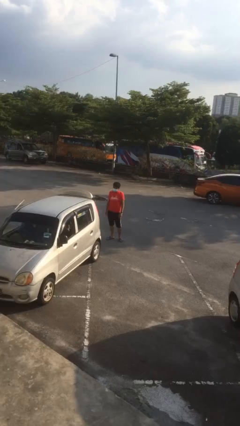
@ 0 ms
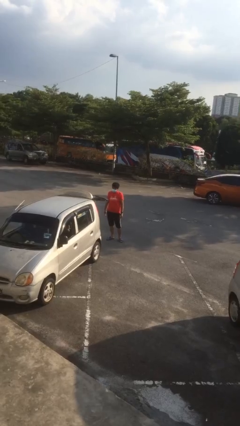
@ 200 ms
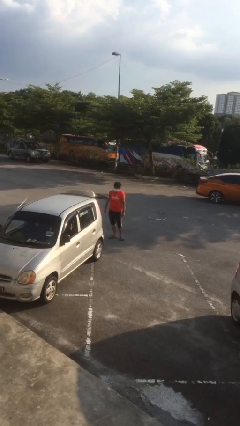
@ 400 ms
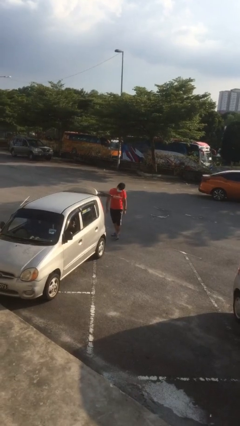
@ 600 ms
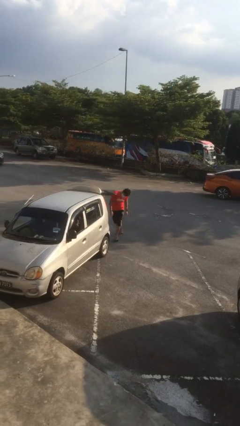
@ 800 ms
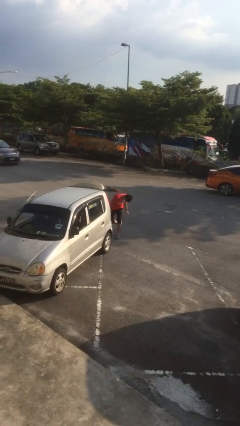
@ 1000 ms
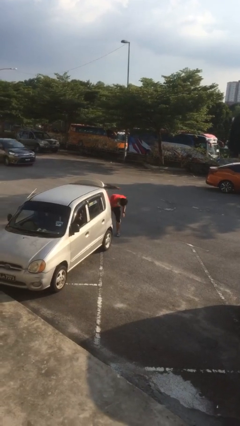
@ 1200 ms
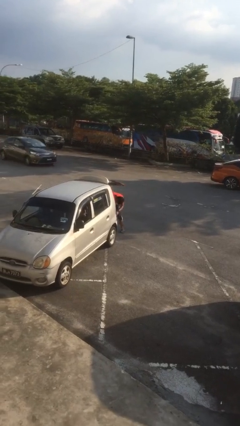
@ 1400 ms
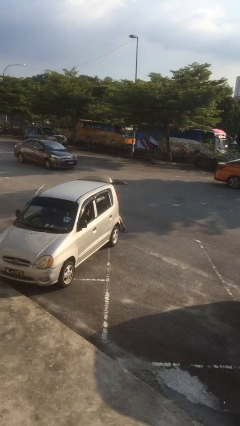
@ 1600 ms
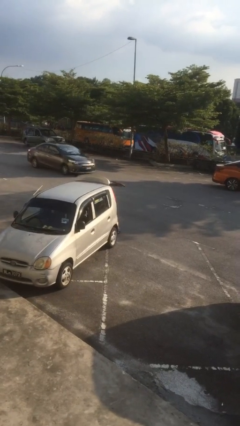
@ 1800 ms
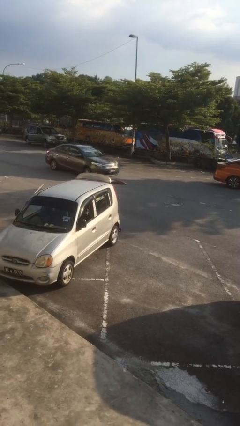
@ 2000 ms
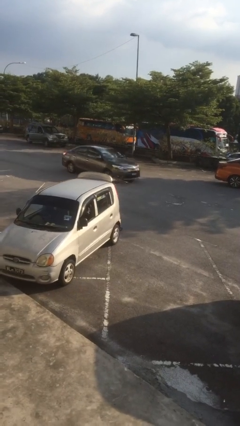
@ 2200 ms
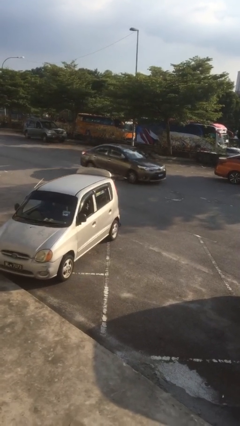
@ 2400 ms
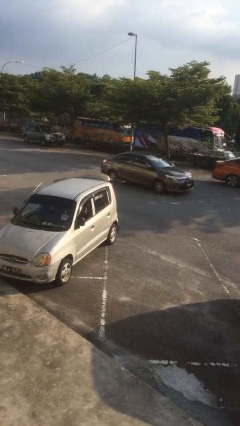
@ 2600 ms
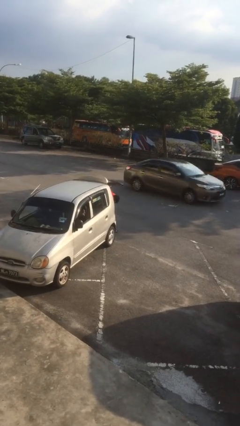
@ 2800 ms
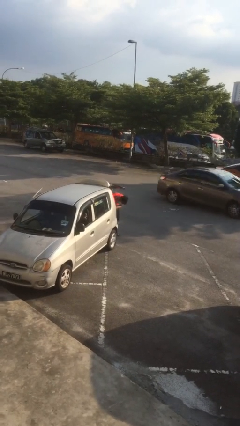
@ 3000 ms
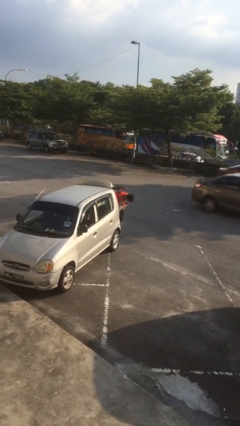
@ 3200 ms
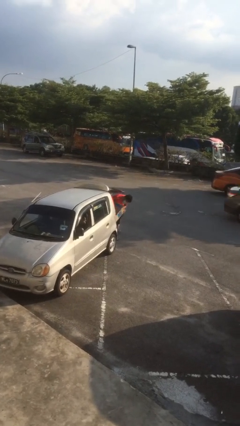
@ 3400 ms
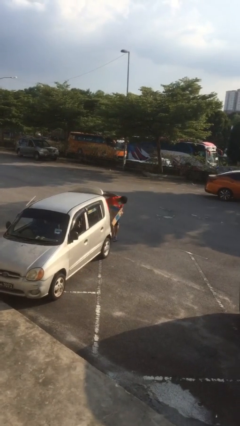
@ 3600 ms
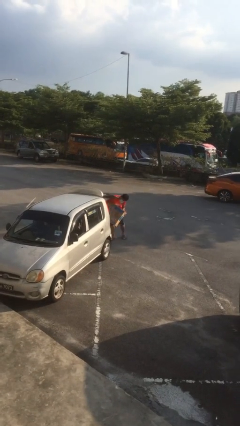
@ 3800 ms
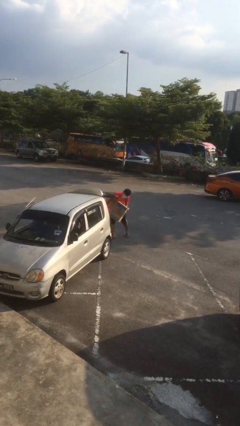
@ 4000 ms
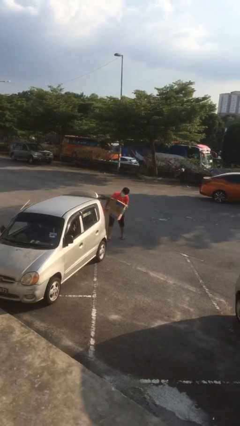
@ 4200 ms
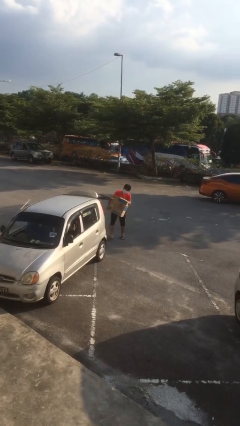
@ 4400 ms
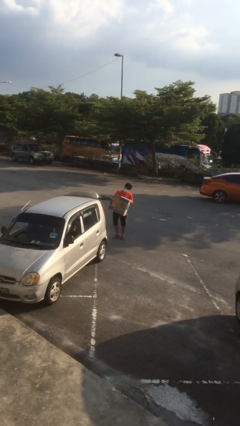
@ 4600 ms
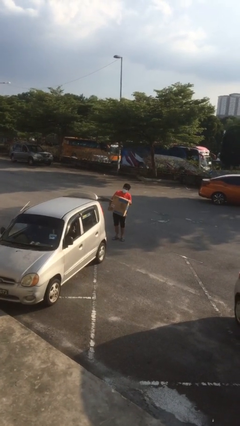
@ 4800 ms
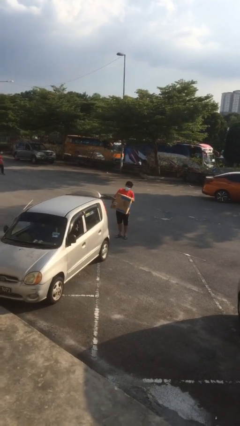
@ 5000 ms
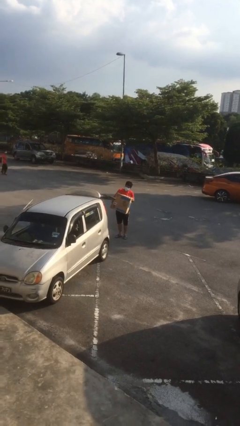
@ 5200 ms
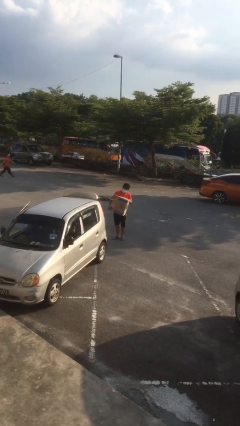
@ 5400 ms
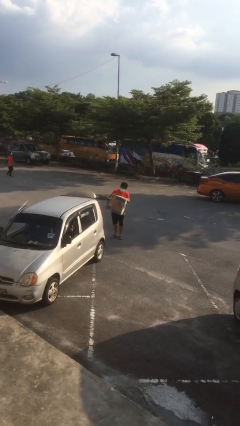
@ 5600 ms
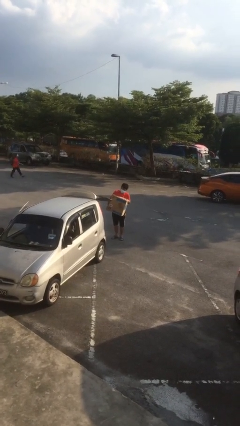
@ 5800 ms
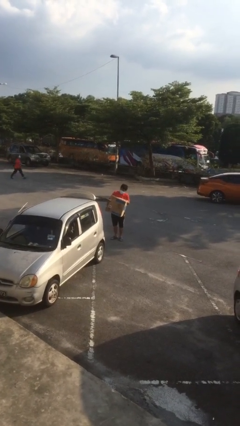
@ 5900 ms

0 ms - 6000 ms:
person unloads car

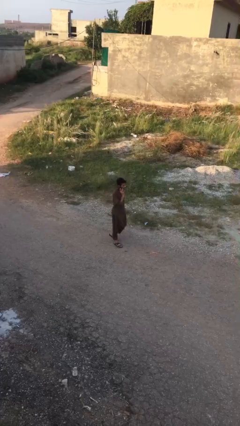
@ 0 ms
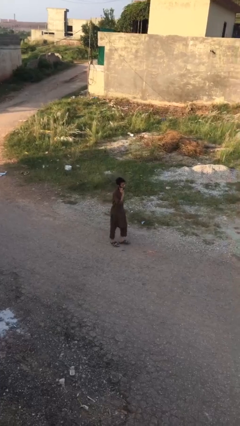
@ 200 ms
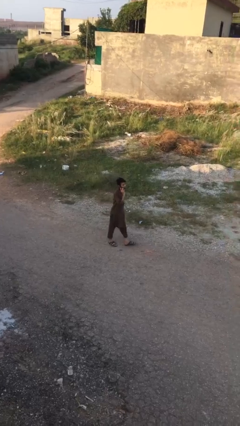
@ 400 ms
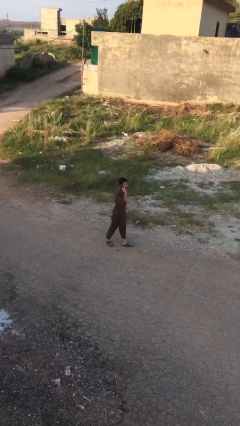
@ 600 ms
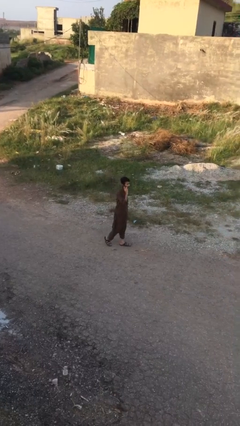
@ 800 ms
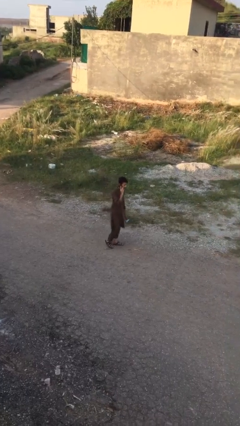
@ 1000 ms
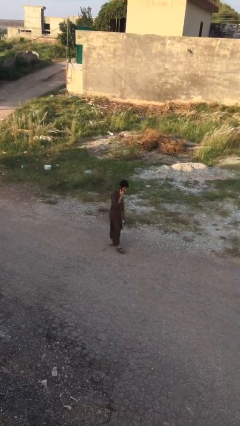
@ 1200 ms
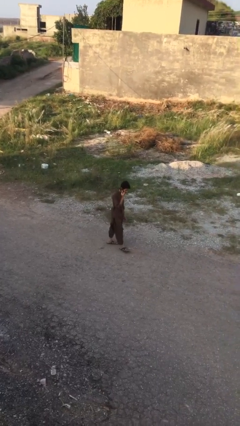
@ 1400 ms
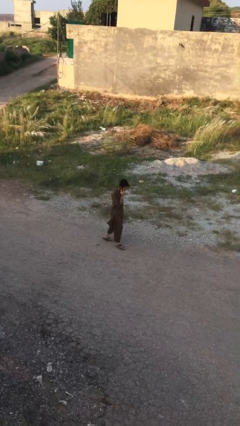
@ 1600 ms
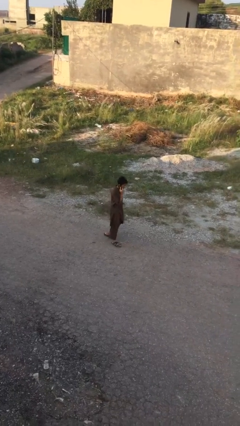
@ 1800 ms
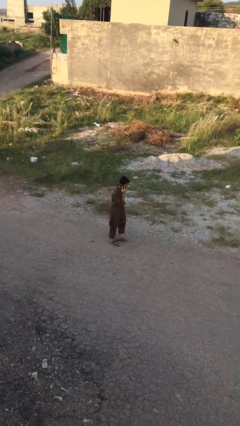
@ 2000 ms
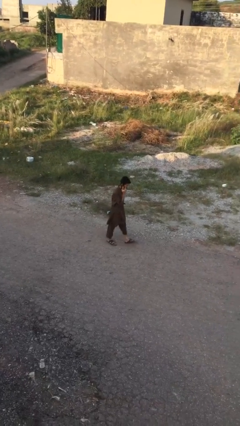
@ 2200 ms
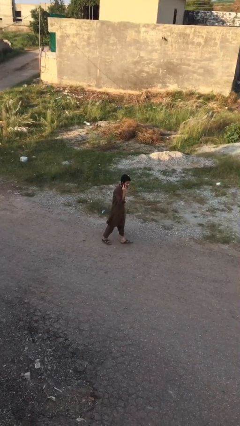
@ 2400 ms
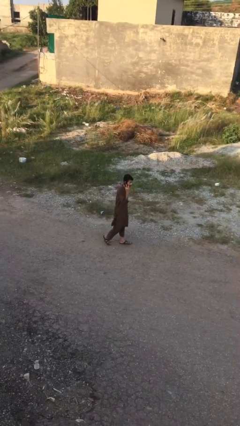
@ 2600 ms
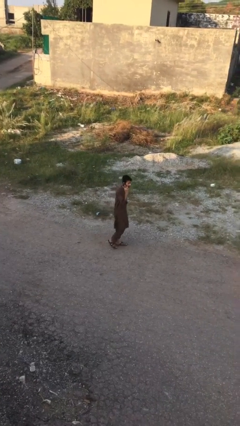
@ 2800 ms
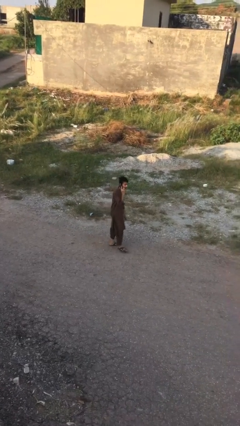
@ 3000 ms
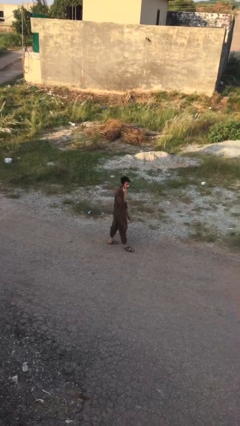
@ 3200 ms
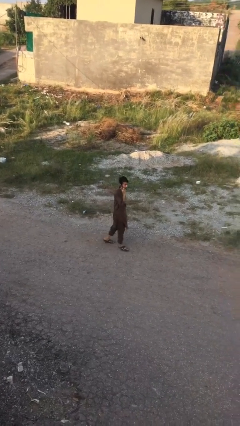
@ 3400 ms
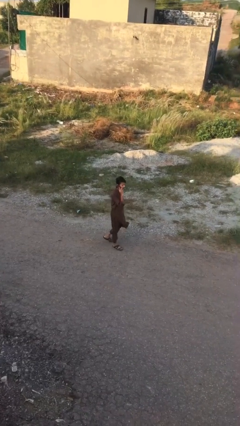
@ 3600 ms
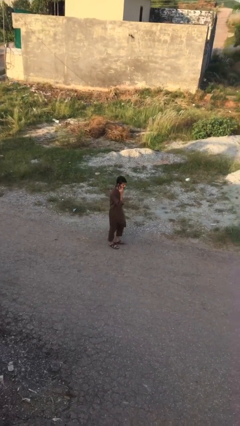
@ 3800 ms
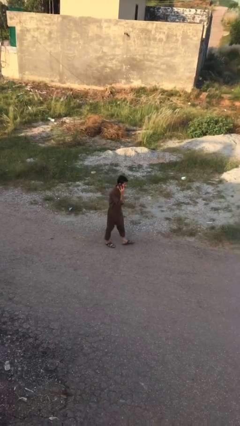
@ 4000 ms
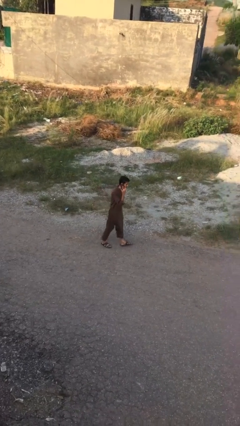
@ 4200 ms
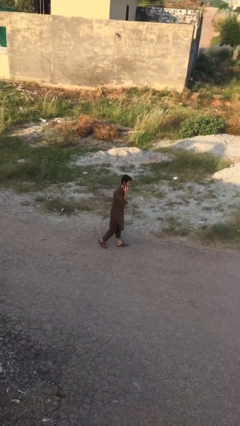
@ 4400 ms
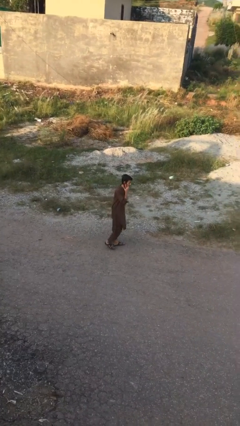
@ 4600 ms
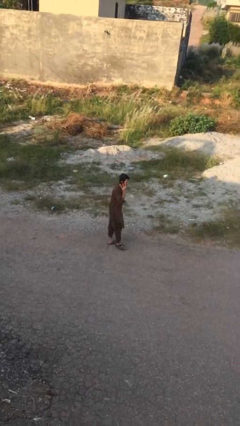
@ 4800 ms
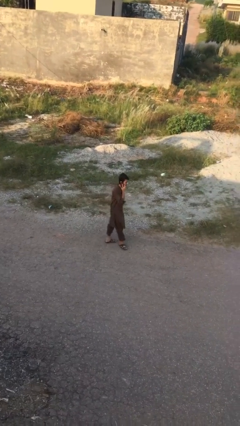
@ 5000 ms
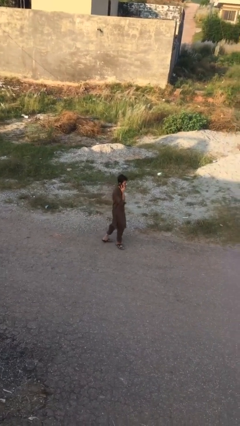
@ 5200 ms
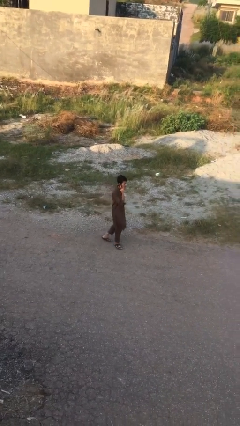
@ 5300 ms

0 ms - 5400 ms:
person talks on phone

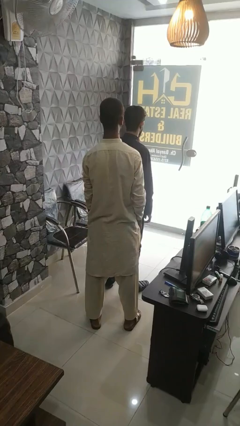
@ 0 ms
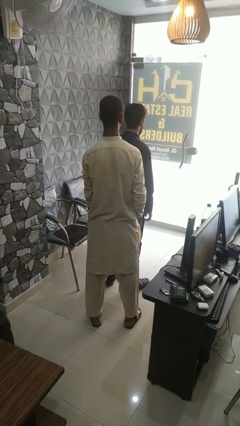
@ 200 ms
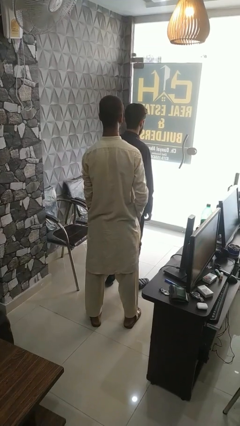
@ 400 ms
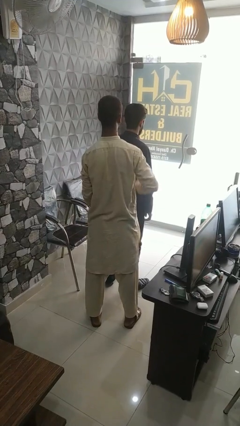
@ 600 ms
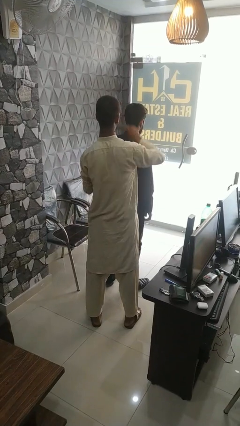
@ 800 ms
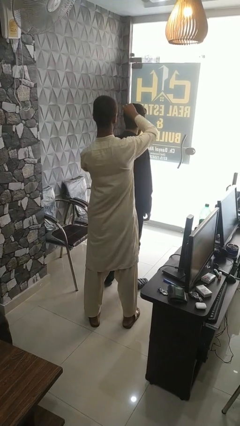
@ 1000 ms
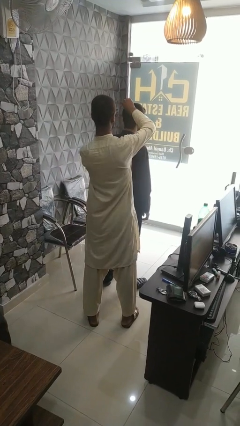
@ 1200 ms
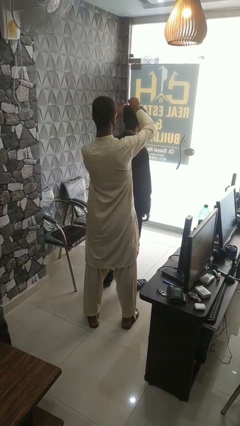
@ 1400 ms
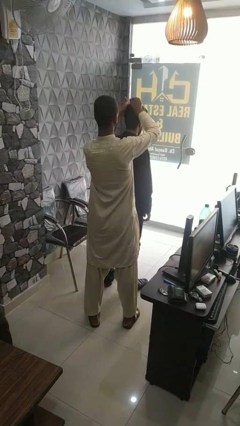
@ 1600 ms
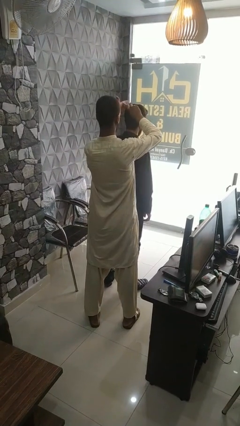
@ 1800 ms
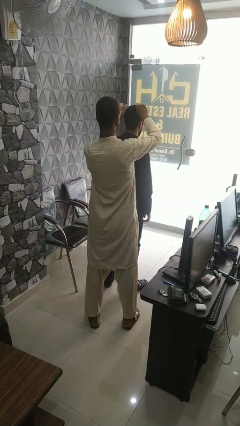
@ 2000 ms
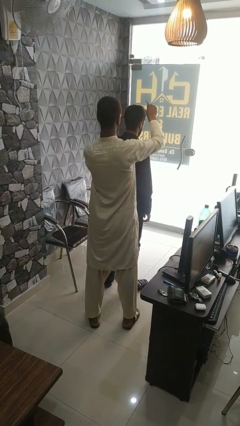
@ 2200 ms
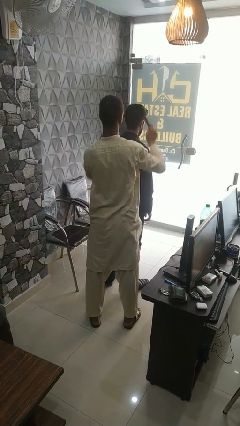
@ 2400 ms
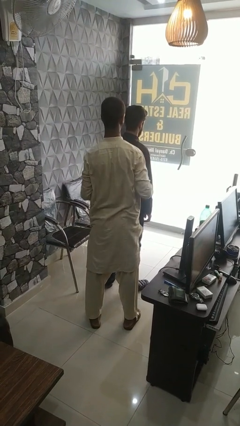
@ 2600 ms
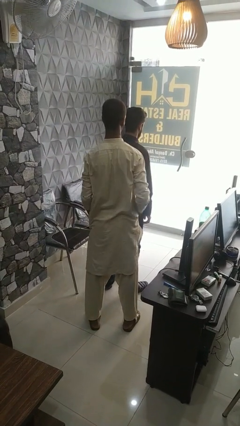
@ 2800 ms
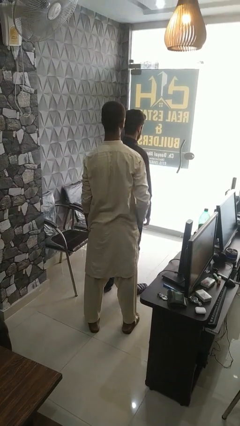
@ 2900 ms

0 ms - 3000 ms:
person brushes hair of person

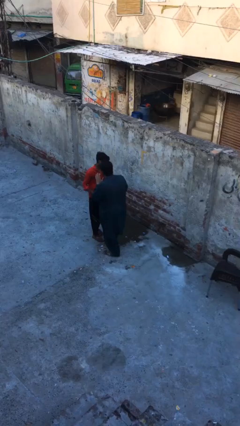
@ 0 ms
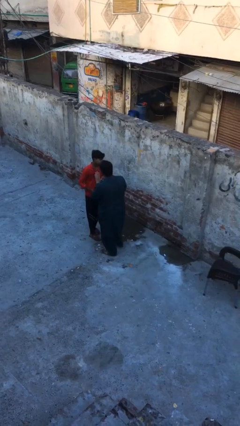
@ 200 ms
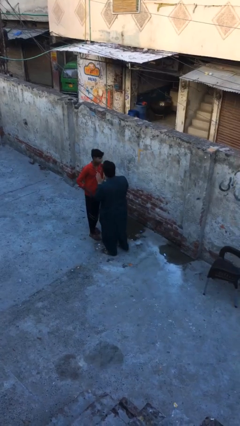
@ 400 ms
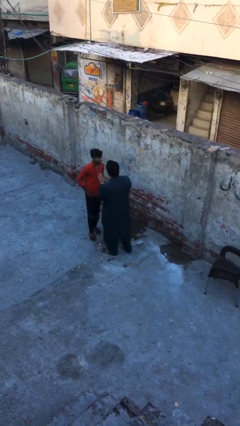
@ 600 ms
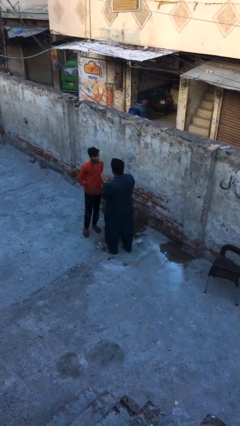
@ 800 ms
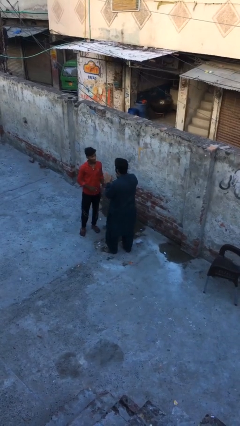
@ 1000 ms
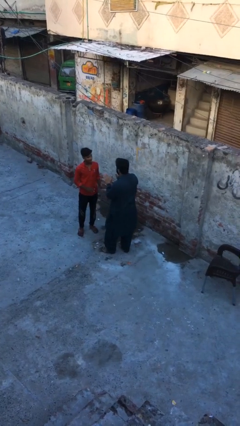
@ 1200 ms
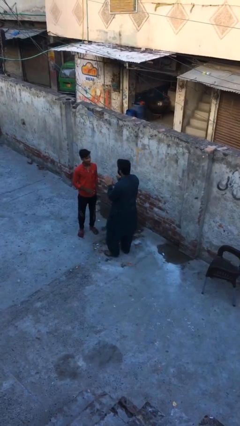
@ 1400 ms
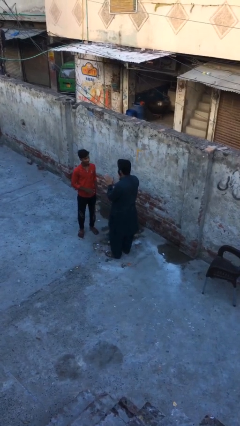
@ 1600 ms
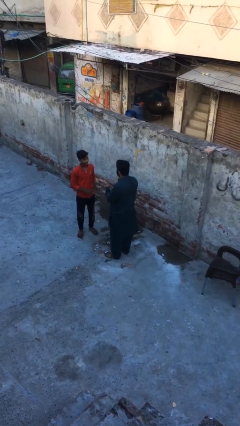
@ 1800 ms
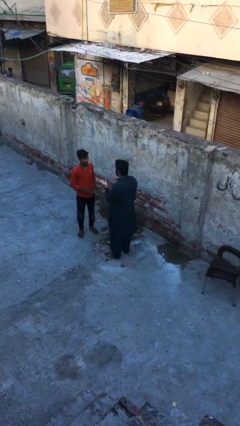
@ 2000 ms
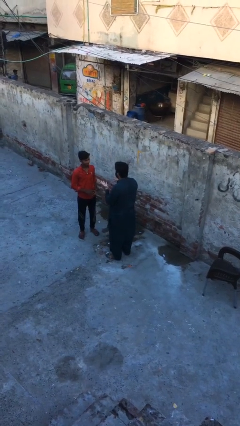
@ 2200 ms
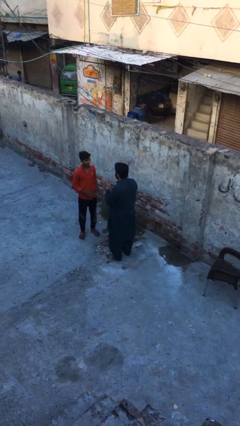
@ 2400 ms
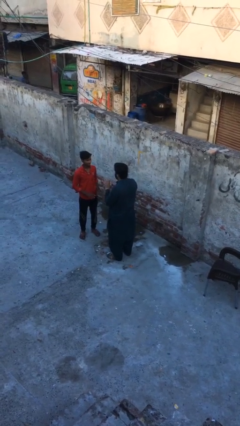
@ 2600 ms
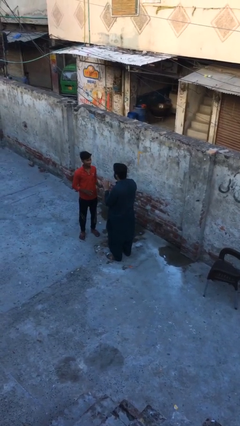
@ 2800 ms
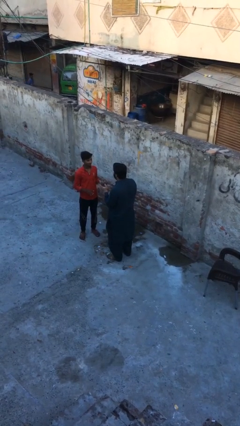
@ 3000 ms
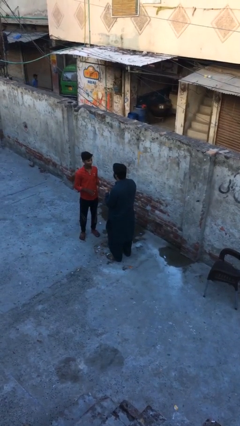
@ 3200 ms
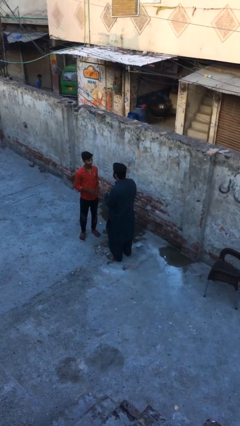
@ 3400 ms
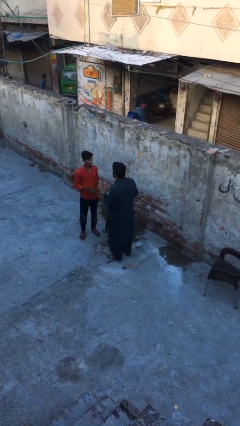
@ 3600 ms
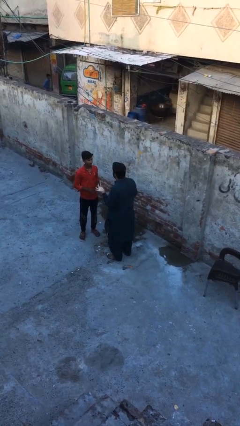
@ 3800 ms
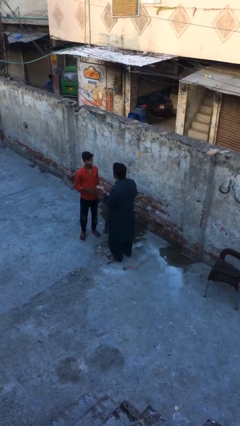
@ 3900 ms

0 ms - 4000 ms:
person talks to person
